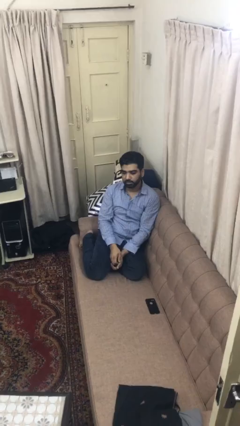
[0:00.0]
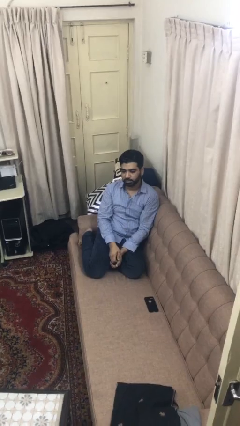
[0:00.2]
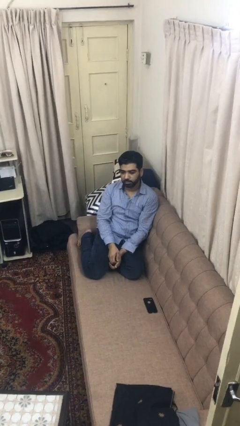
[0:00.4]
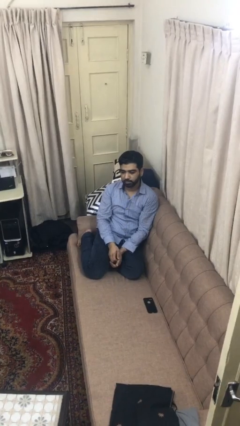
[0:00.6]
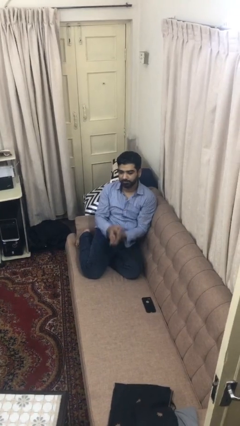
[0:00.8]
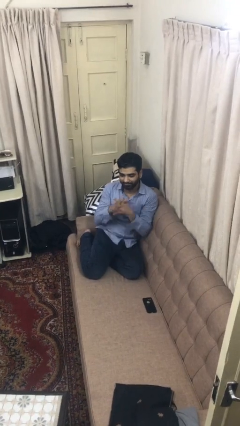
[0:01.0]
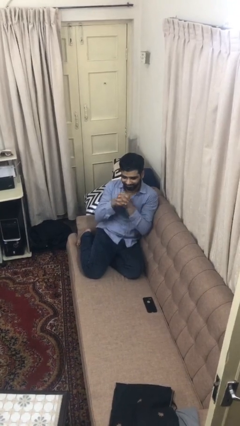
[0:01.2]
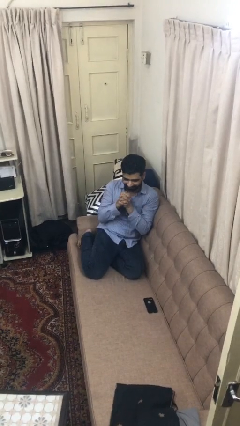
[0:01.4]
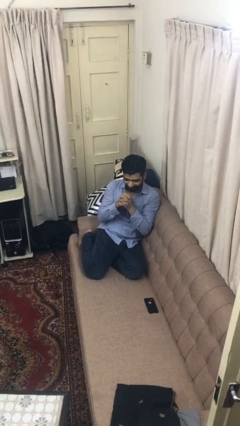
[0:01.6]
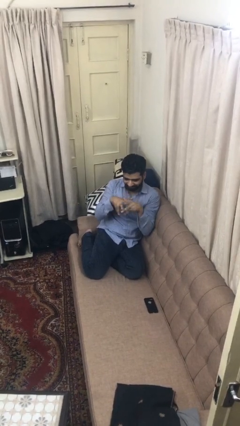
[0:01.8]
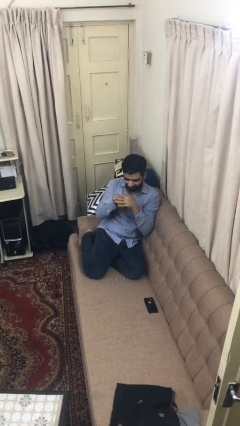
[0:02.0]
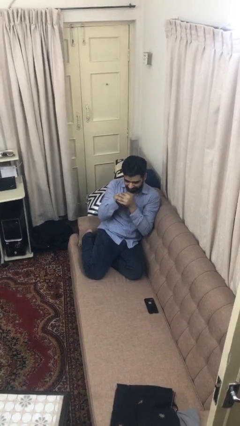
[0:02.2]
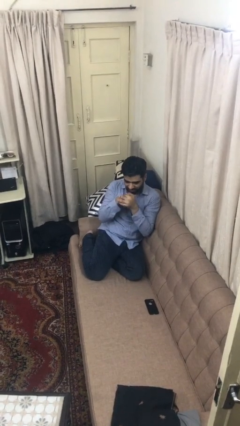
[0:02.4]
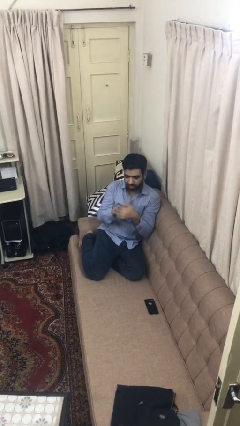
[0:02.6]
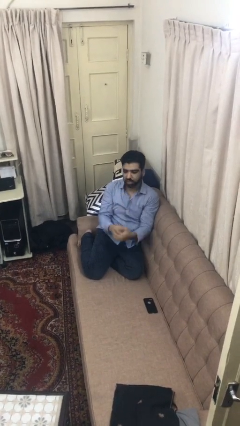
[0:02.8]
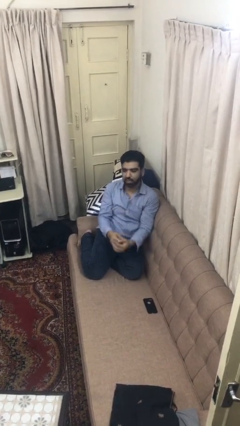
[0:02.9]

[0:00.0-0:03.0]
person cracks knuckles

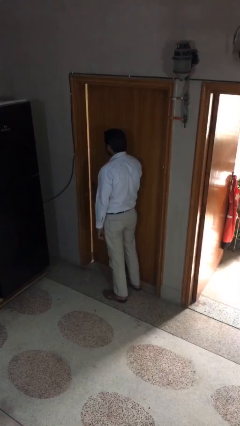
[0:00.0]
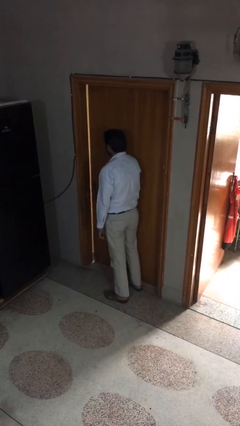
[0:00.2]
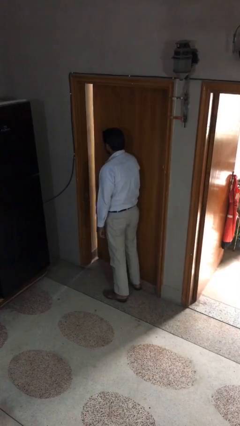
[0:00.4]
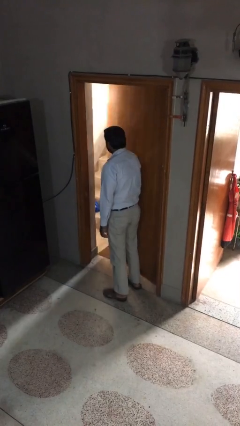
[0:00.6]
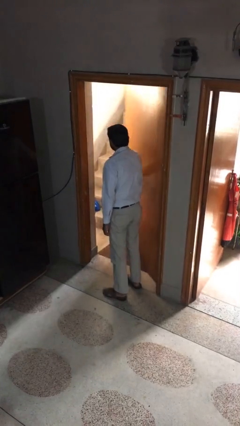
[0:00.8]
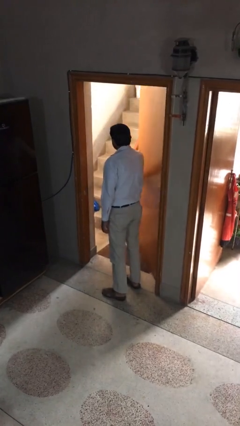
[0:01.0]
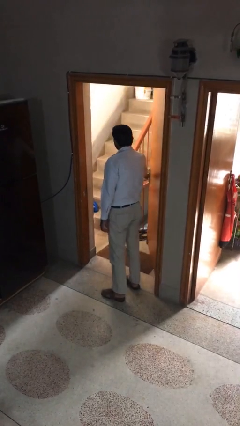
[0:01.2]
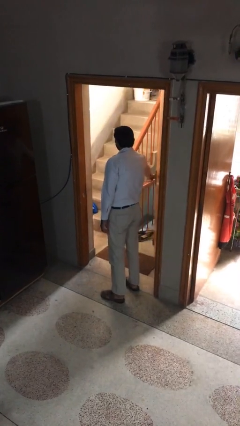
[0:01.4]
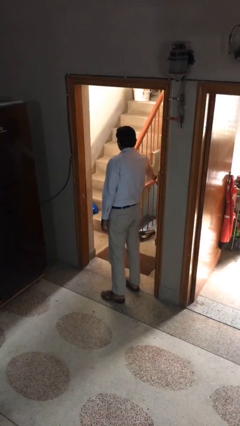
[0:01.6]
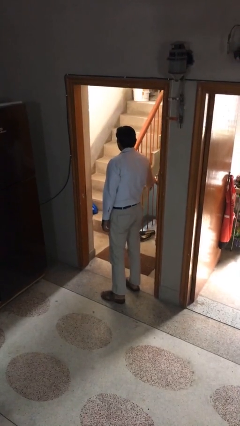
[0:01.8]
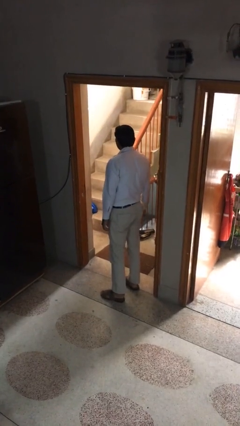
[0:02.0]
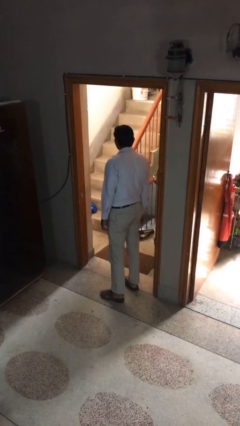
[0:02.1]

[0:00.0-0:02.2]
person opens facility door

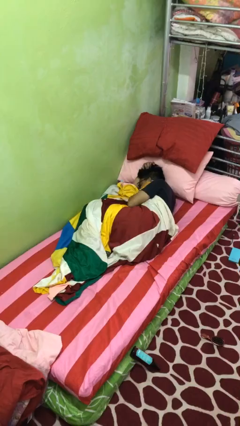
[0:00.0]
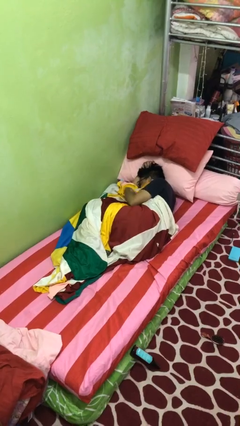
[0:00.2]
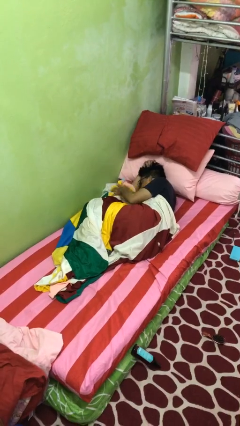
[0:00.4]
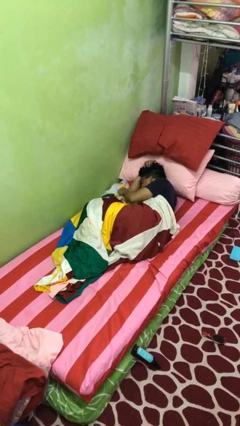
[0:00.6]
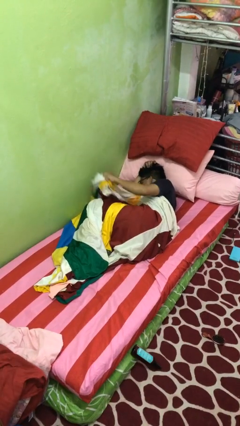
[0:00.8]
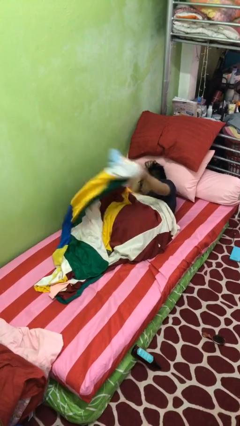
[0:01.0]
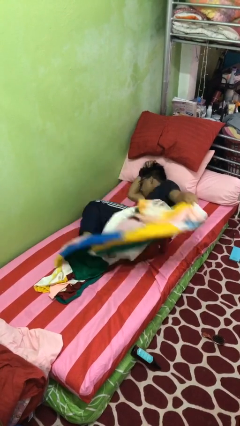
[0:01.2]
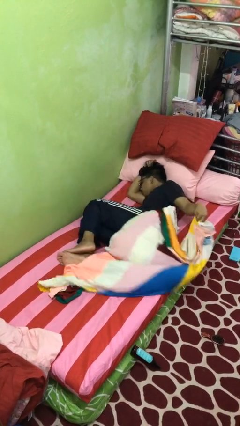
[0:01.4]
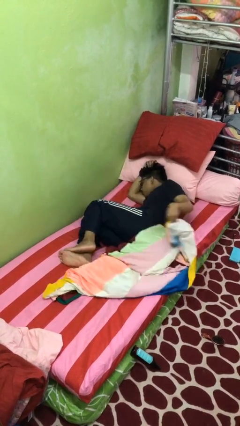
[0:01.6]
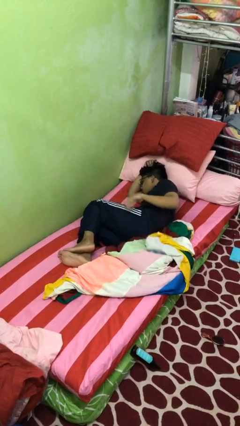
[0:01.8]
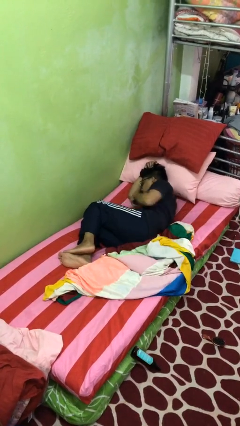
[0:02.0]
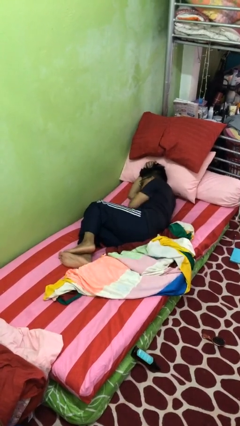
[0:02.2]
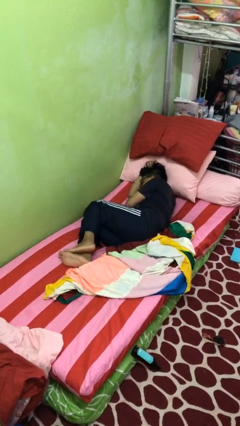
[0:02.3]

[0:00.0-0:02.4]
person uncovers with blanket

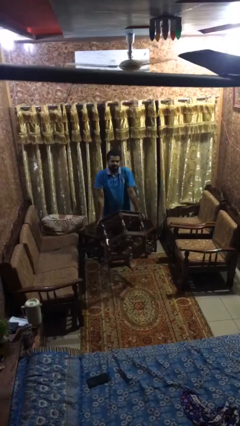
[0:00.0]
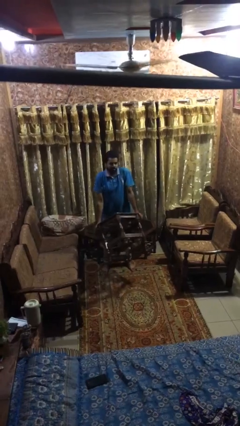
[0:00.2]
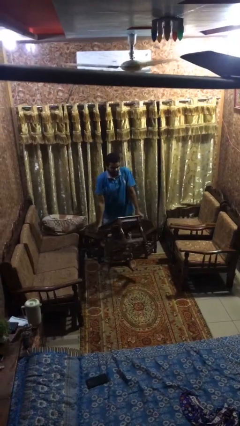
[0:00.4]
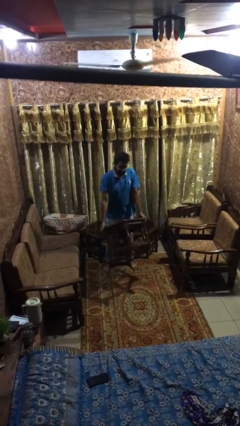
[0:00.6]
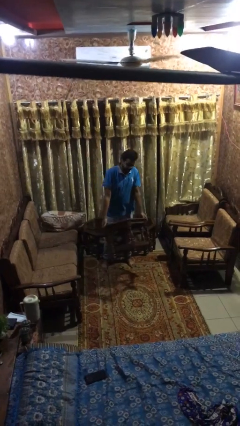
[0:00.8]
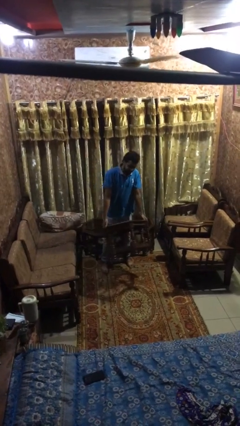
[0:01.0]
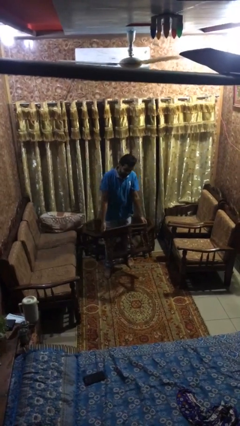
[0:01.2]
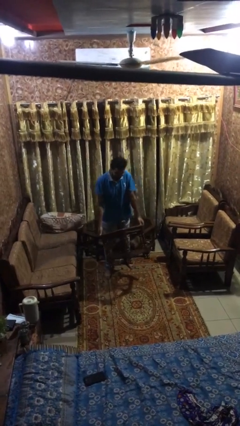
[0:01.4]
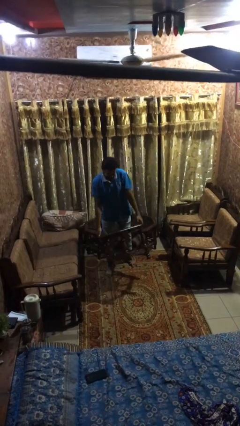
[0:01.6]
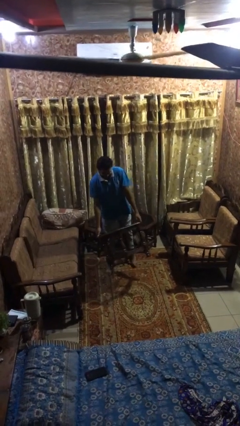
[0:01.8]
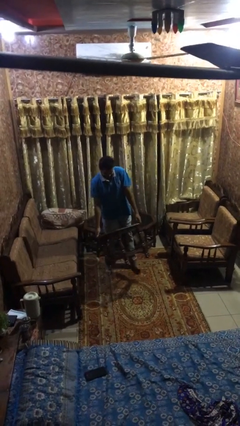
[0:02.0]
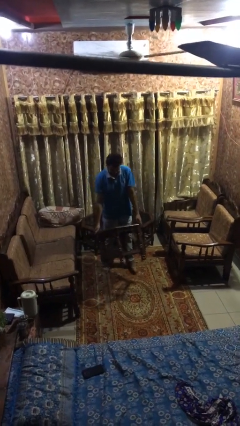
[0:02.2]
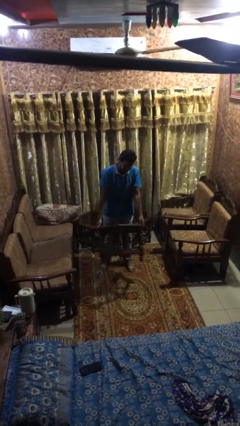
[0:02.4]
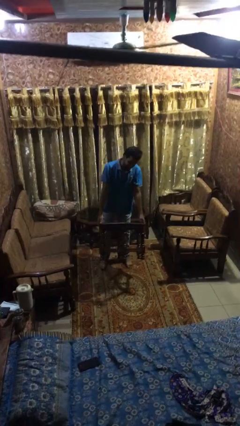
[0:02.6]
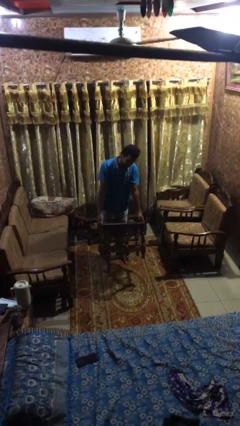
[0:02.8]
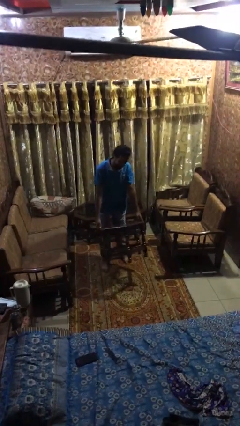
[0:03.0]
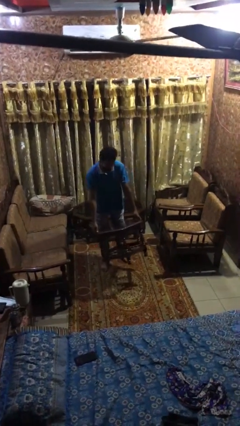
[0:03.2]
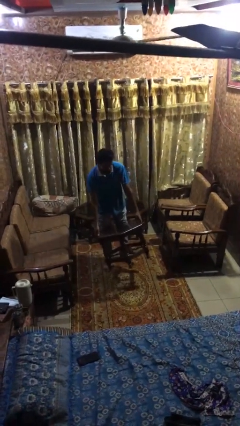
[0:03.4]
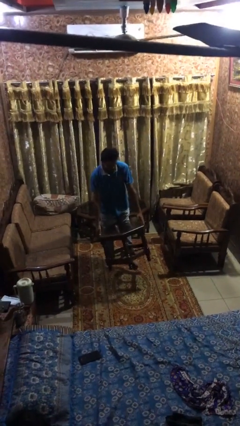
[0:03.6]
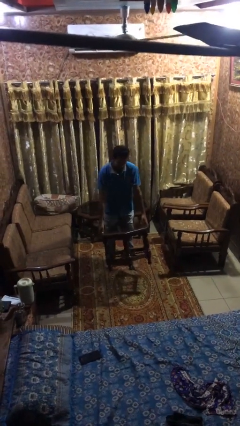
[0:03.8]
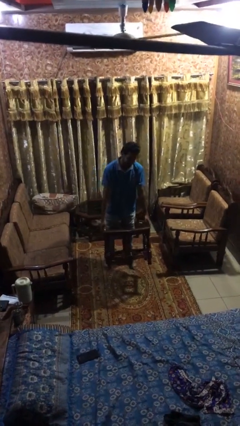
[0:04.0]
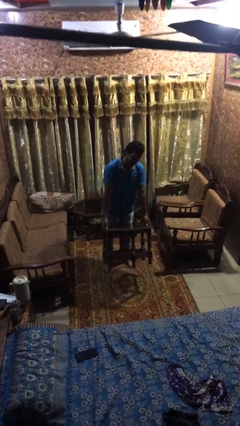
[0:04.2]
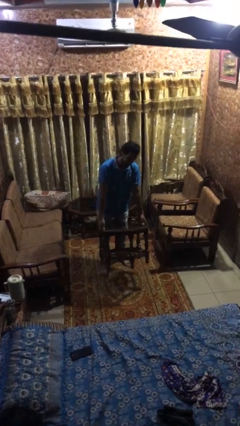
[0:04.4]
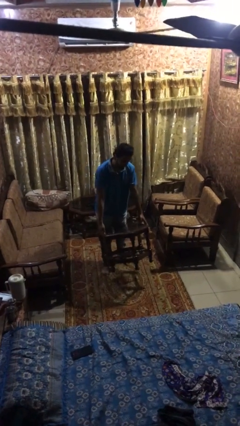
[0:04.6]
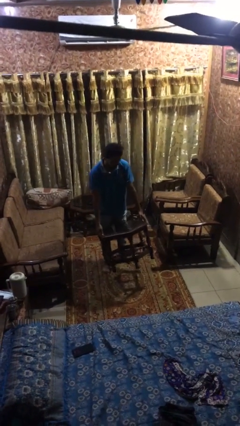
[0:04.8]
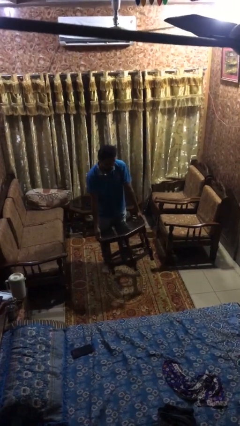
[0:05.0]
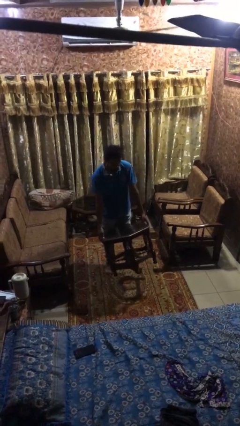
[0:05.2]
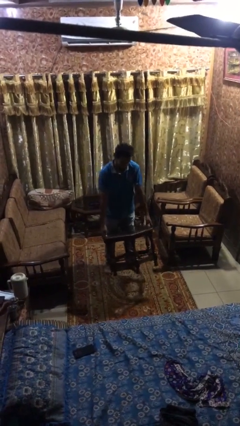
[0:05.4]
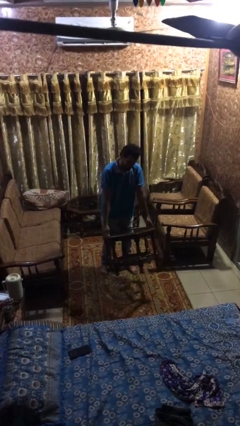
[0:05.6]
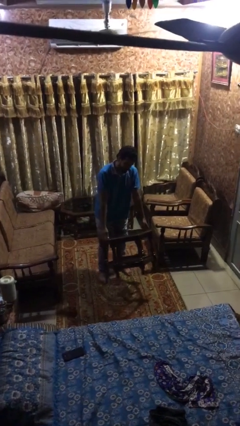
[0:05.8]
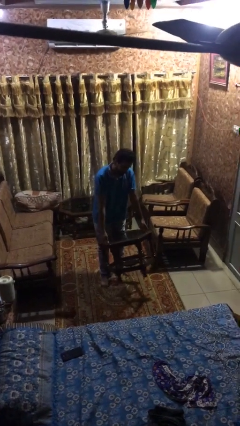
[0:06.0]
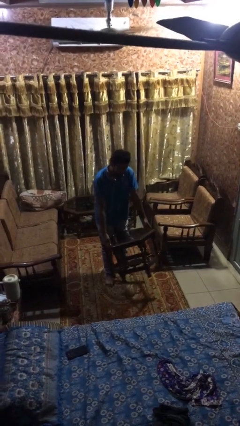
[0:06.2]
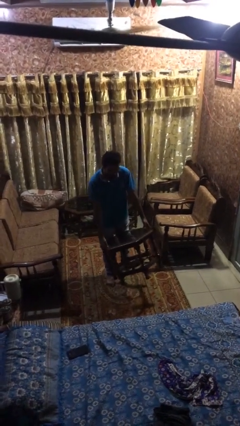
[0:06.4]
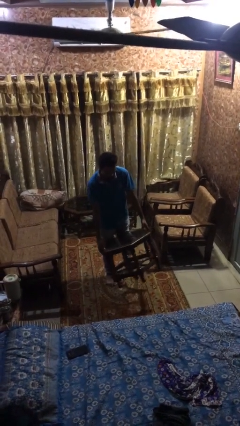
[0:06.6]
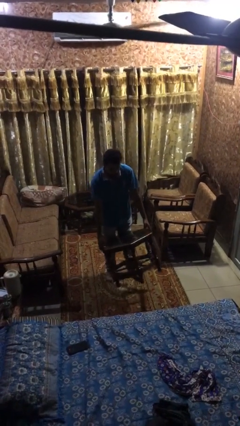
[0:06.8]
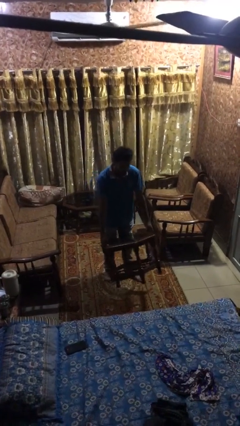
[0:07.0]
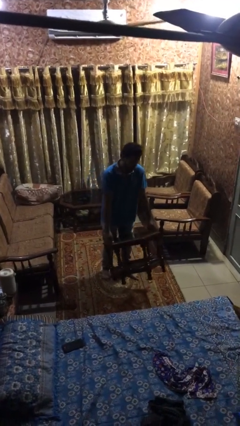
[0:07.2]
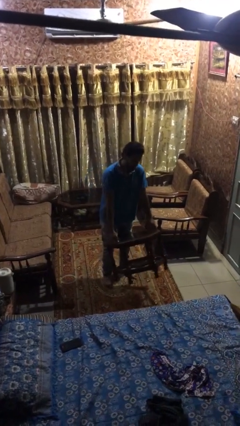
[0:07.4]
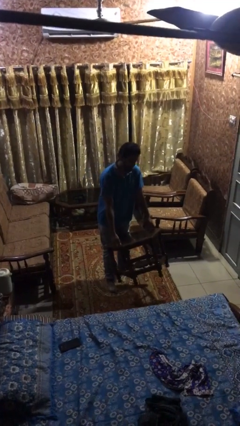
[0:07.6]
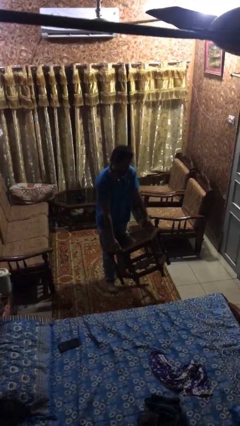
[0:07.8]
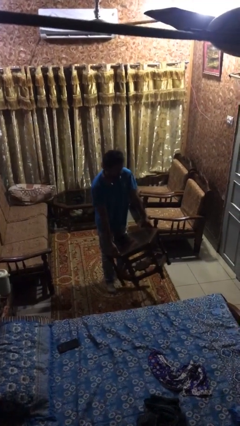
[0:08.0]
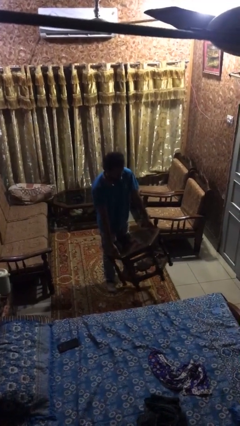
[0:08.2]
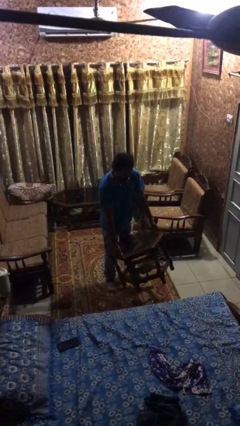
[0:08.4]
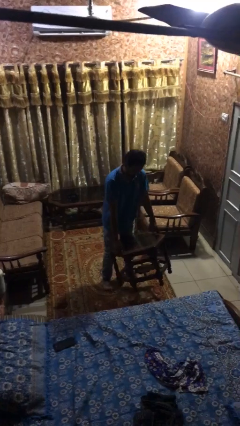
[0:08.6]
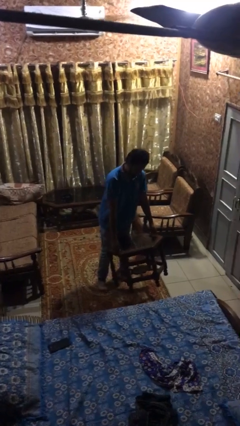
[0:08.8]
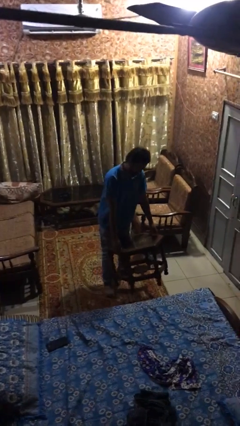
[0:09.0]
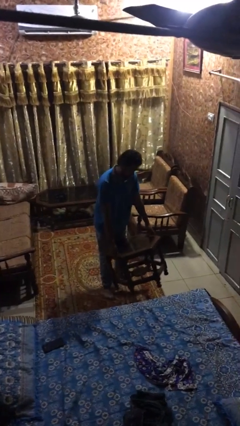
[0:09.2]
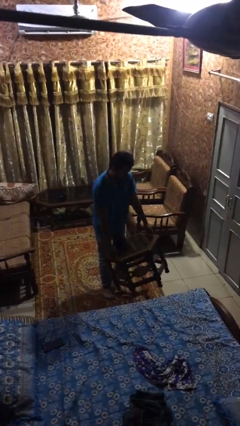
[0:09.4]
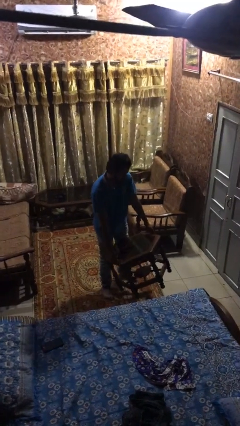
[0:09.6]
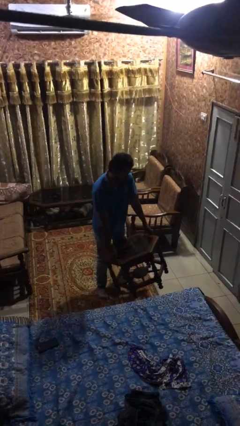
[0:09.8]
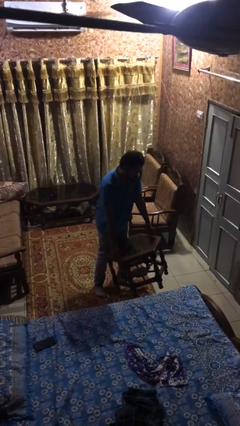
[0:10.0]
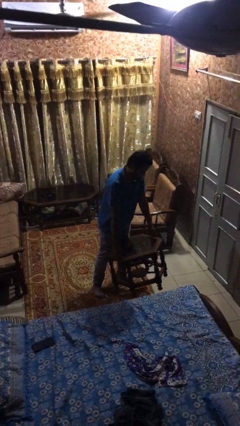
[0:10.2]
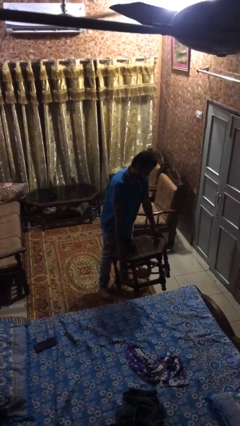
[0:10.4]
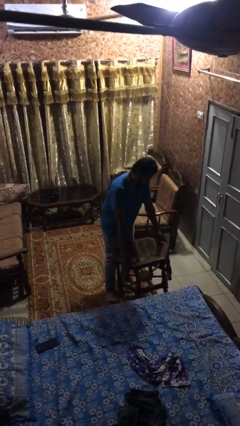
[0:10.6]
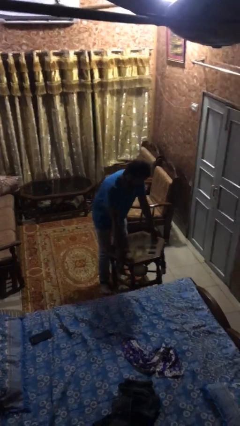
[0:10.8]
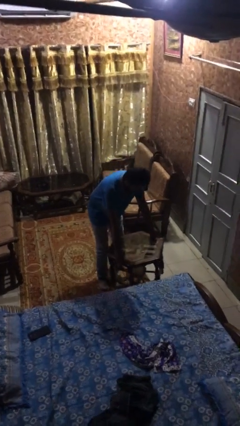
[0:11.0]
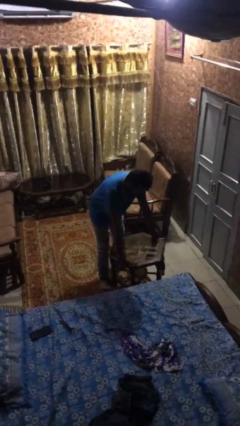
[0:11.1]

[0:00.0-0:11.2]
person carries heavy object
